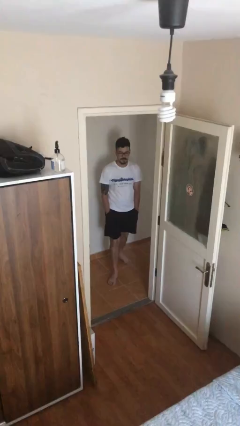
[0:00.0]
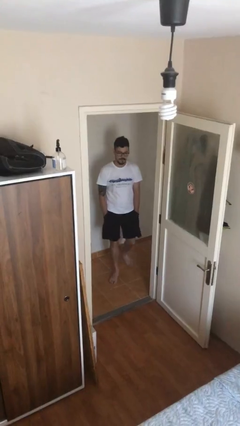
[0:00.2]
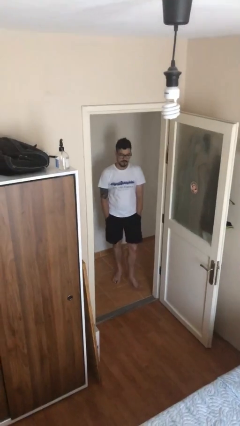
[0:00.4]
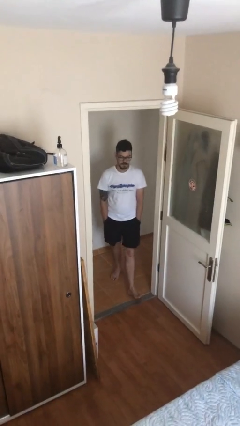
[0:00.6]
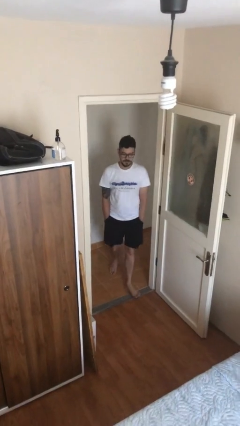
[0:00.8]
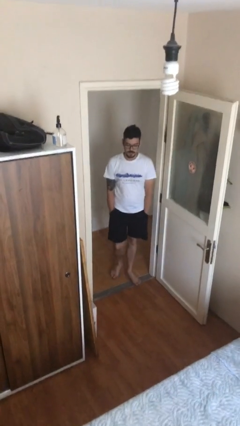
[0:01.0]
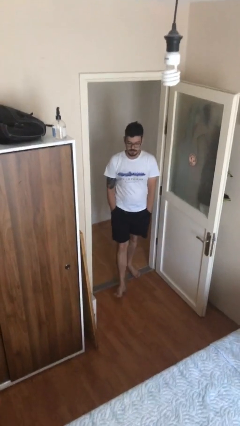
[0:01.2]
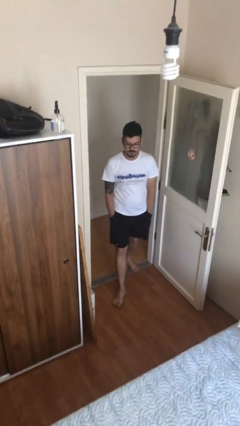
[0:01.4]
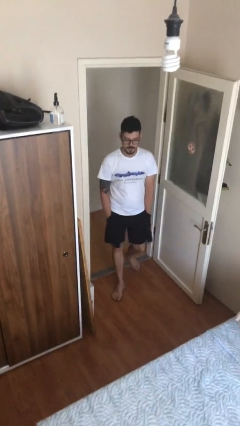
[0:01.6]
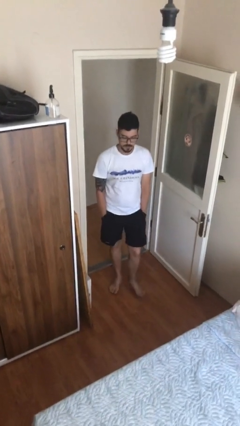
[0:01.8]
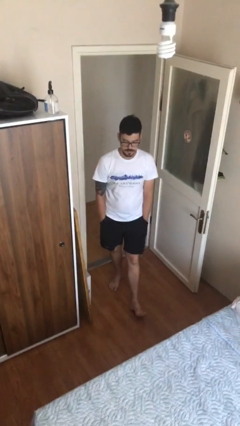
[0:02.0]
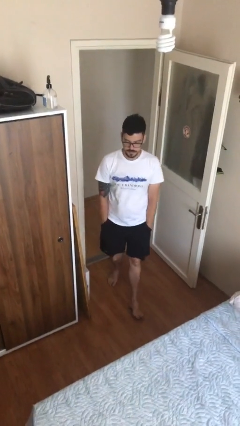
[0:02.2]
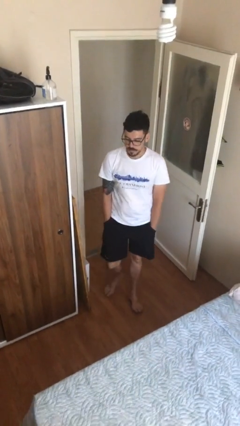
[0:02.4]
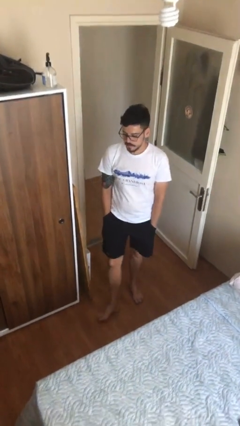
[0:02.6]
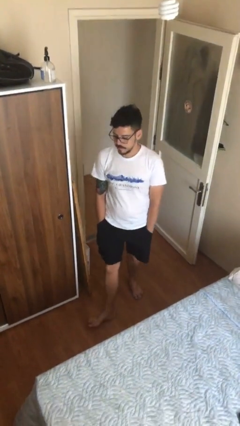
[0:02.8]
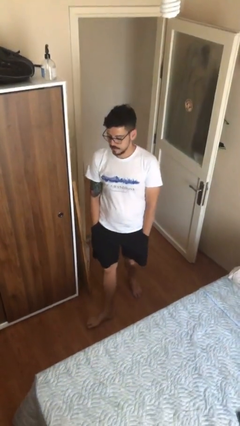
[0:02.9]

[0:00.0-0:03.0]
person enters scene through structure

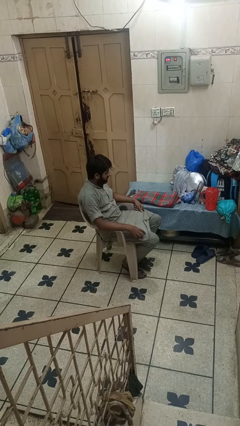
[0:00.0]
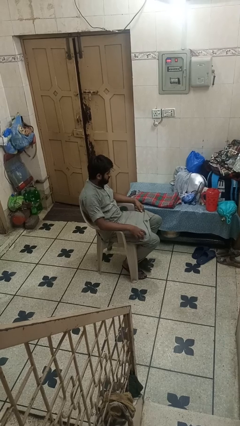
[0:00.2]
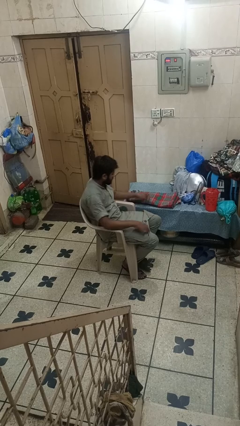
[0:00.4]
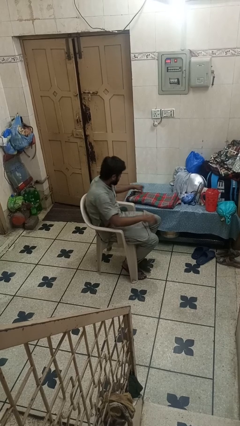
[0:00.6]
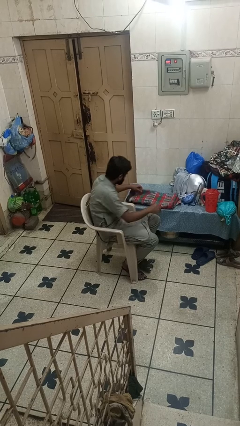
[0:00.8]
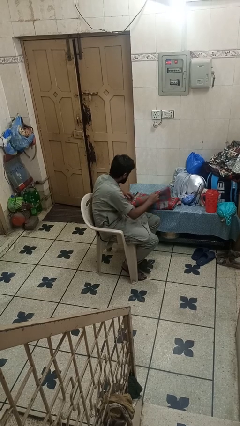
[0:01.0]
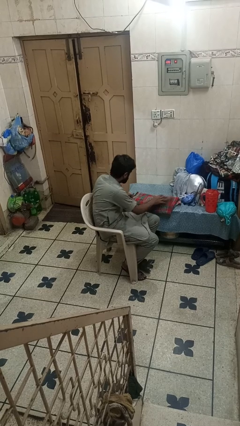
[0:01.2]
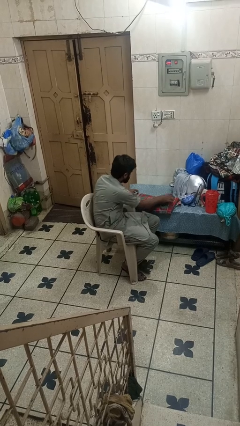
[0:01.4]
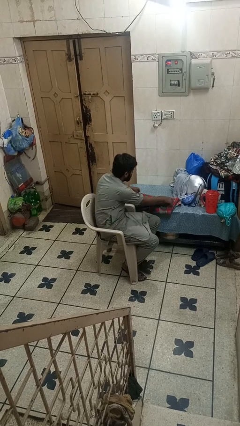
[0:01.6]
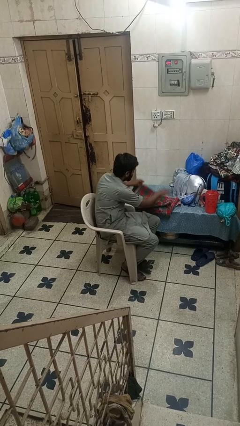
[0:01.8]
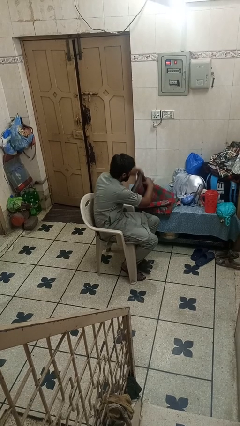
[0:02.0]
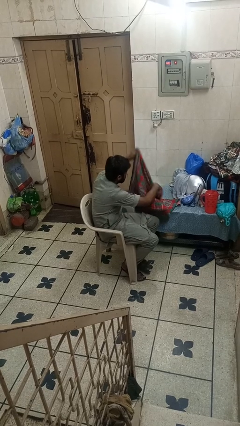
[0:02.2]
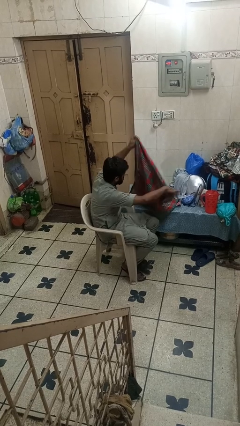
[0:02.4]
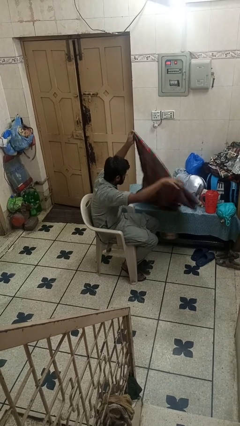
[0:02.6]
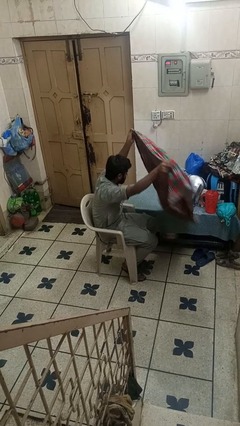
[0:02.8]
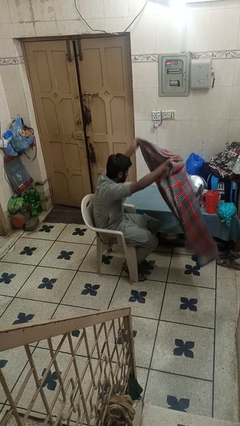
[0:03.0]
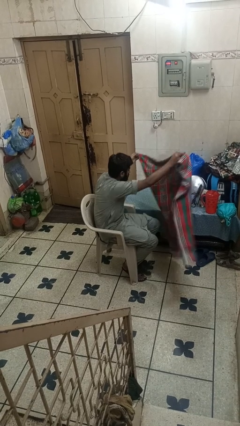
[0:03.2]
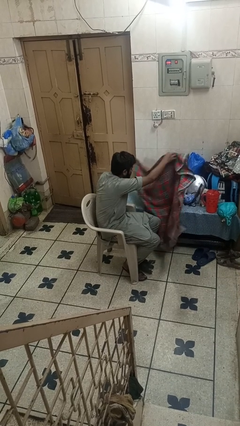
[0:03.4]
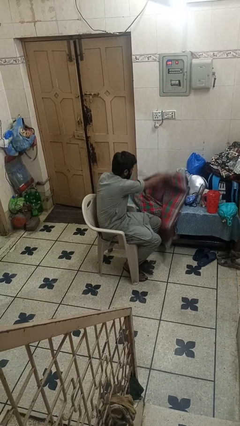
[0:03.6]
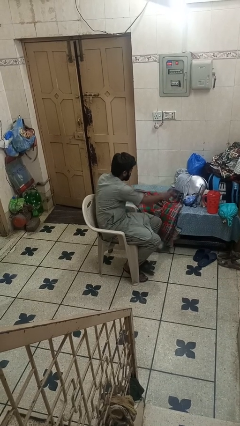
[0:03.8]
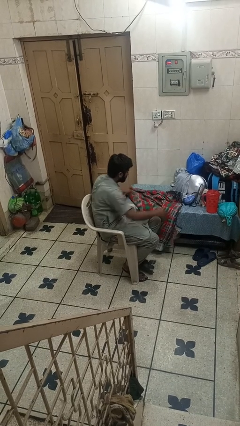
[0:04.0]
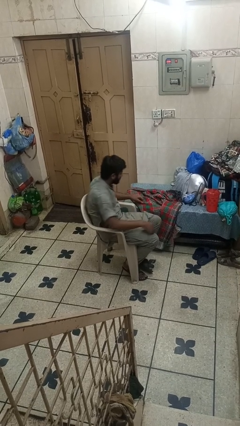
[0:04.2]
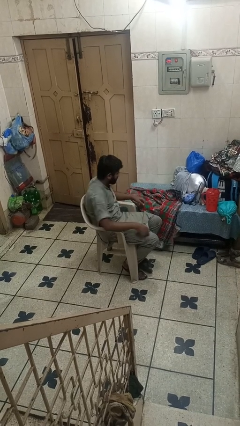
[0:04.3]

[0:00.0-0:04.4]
person unfolds blanket

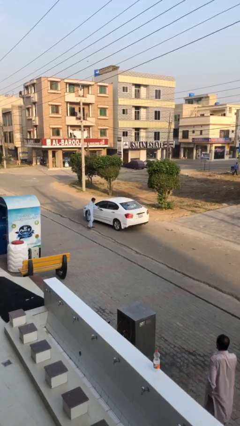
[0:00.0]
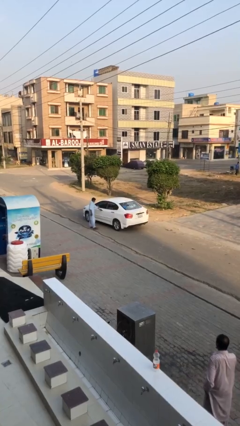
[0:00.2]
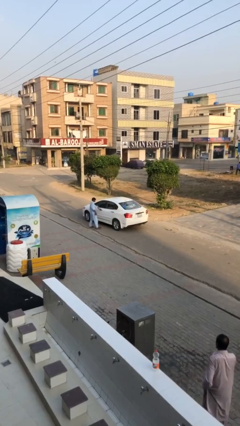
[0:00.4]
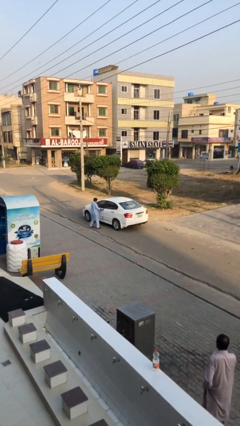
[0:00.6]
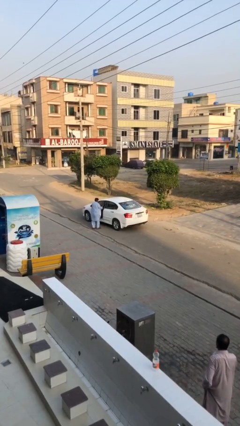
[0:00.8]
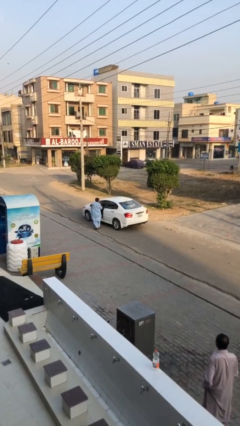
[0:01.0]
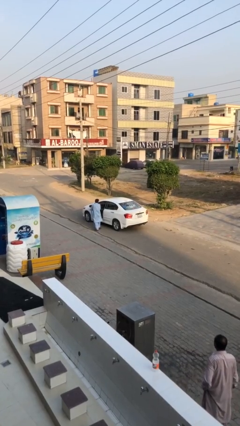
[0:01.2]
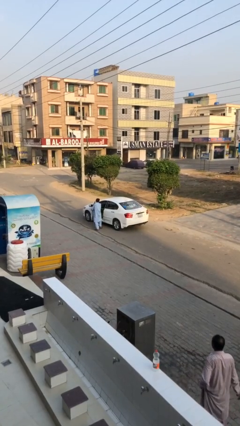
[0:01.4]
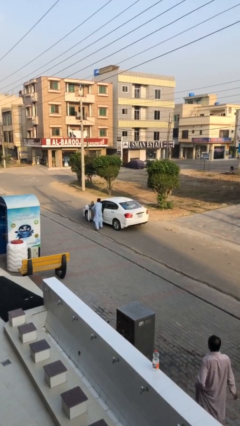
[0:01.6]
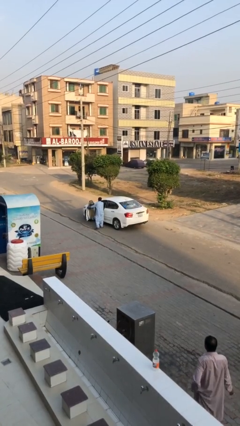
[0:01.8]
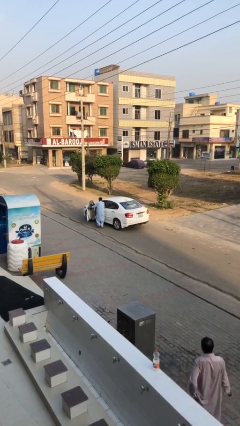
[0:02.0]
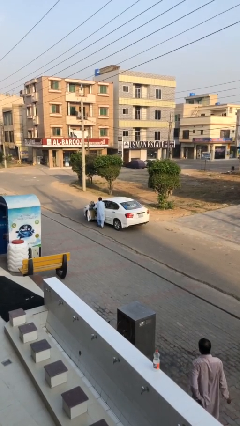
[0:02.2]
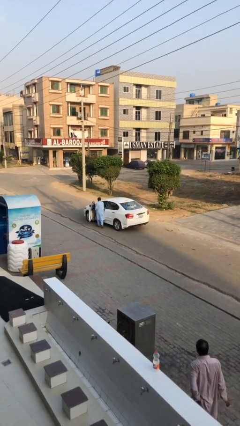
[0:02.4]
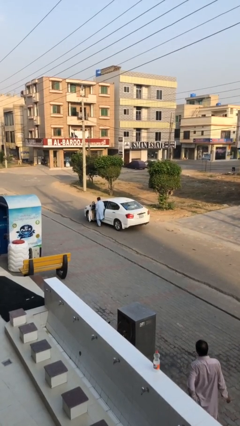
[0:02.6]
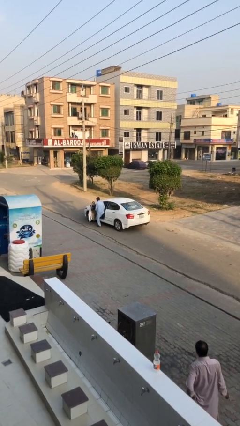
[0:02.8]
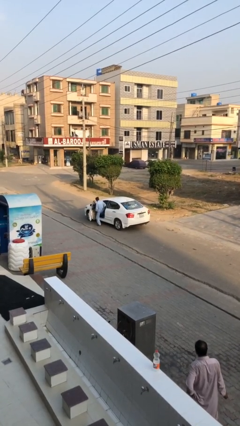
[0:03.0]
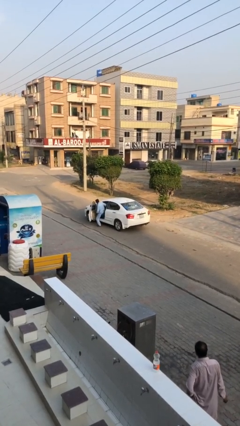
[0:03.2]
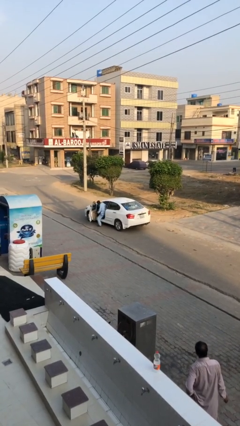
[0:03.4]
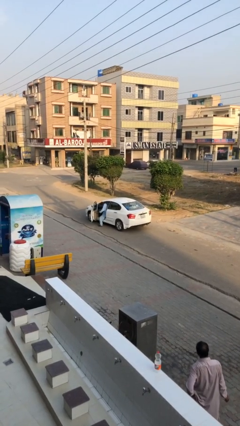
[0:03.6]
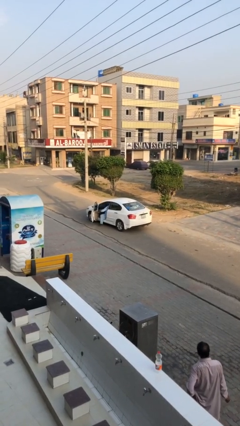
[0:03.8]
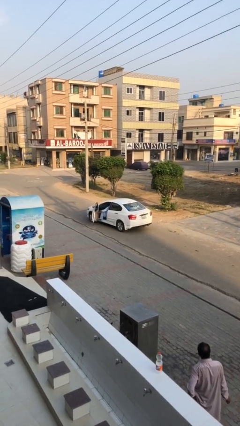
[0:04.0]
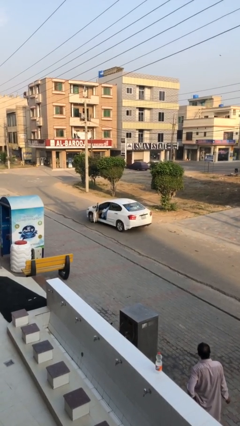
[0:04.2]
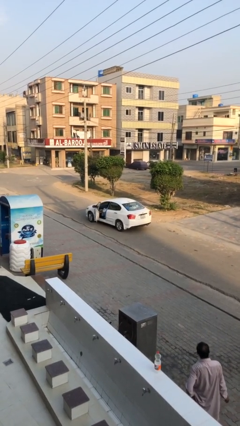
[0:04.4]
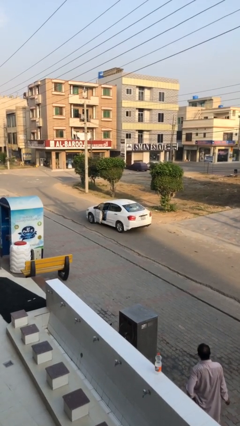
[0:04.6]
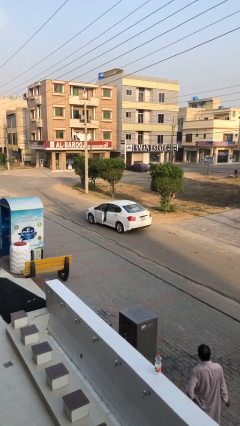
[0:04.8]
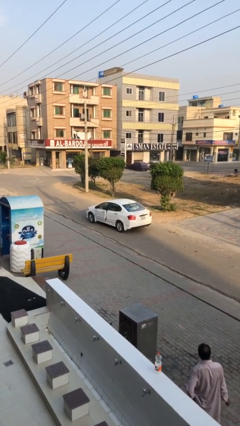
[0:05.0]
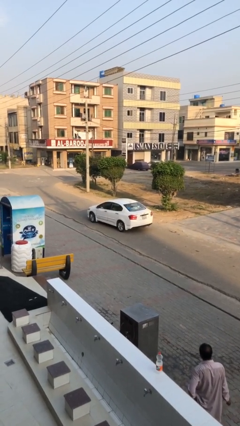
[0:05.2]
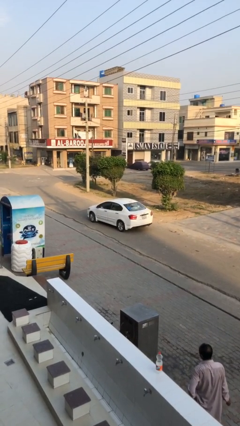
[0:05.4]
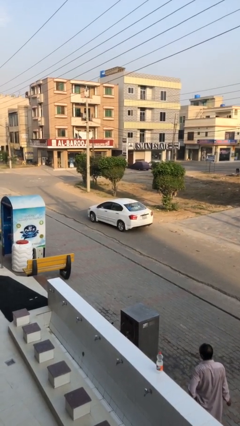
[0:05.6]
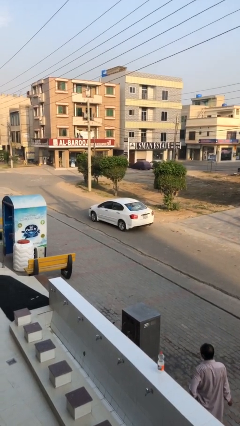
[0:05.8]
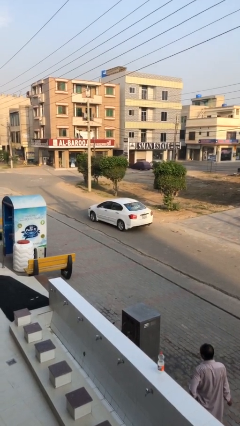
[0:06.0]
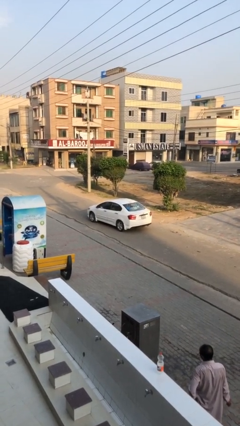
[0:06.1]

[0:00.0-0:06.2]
car picks up person

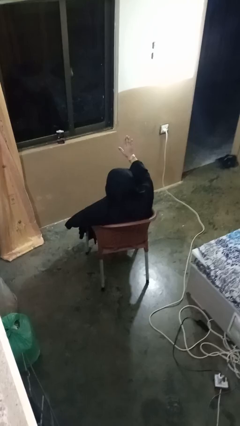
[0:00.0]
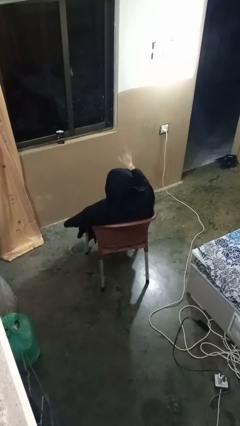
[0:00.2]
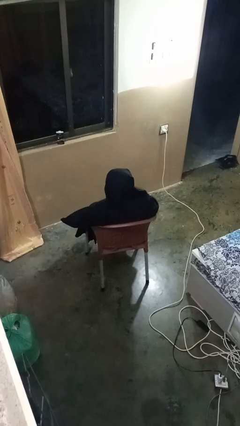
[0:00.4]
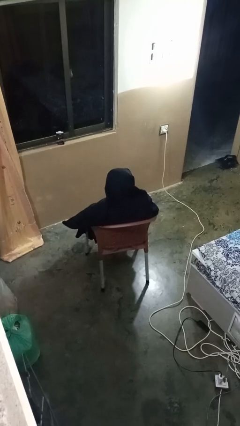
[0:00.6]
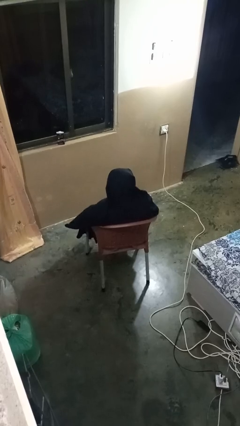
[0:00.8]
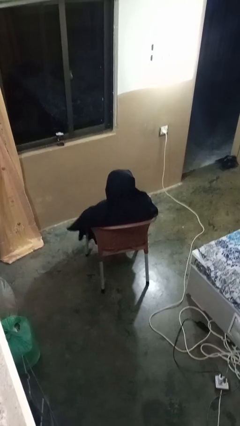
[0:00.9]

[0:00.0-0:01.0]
person gestures lower hand

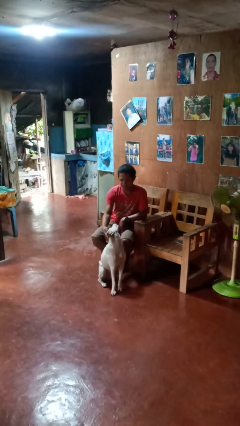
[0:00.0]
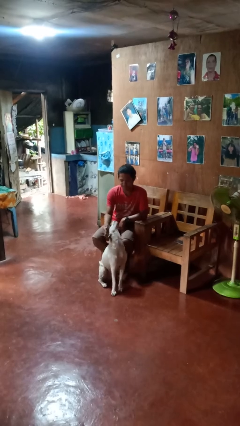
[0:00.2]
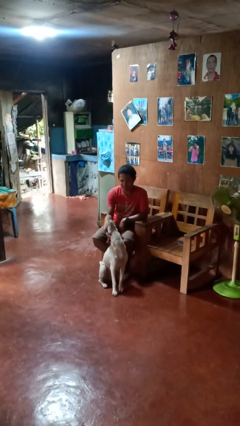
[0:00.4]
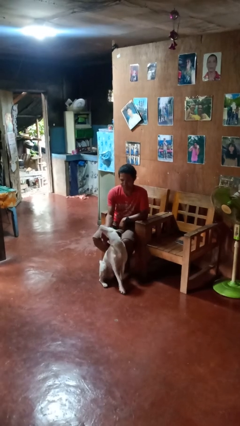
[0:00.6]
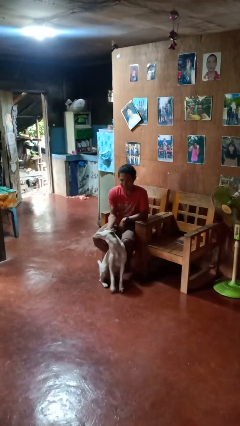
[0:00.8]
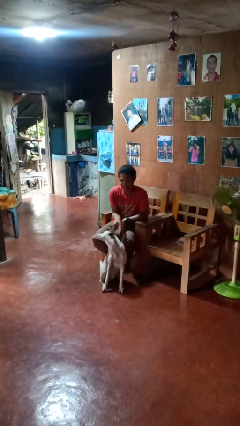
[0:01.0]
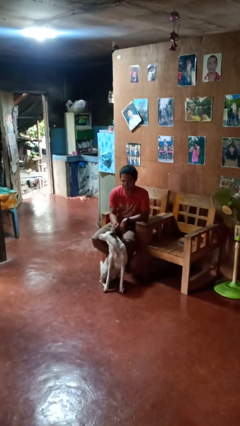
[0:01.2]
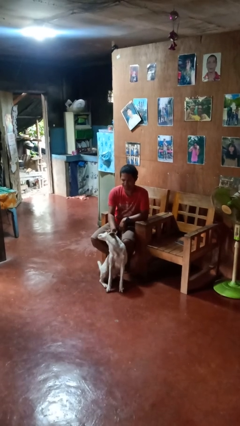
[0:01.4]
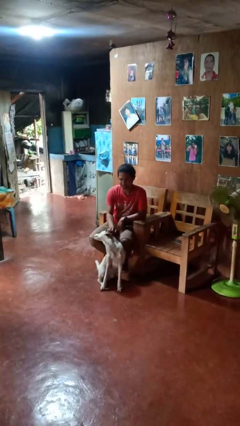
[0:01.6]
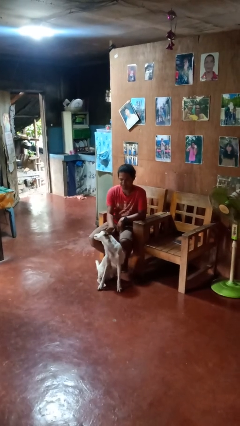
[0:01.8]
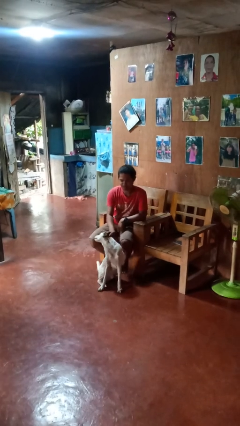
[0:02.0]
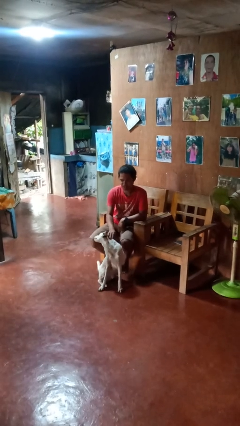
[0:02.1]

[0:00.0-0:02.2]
person pets dog

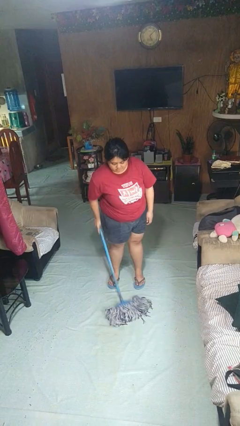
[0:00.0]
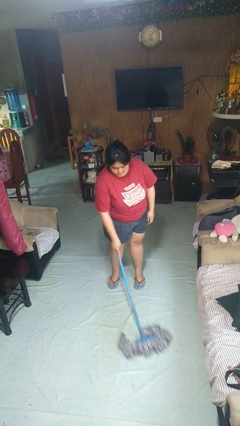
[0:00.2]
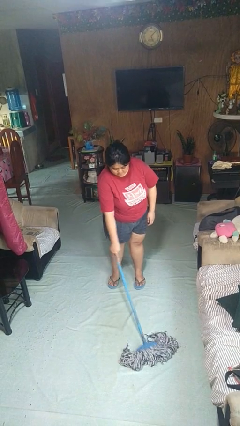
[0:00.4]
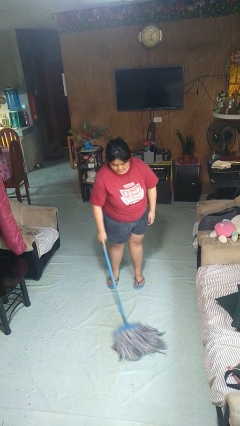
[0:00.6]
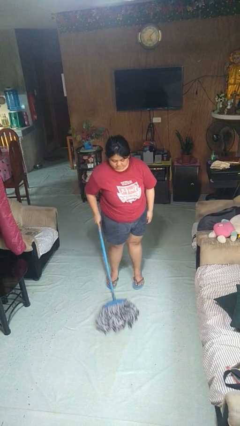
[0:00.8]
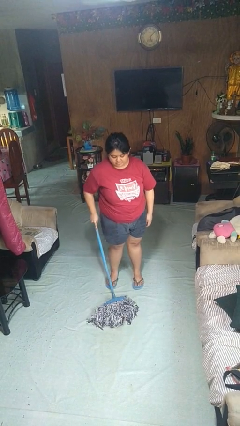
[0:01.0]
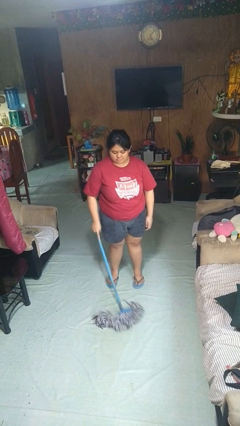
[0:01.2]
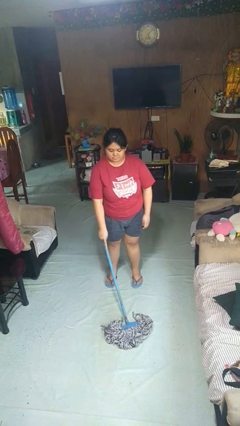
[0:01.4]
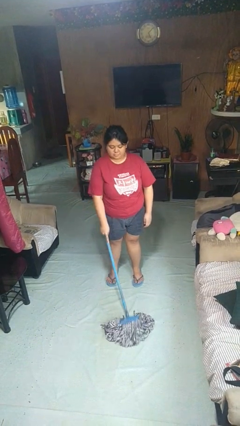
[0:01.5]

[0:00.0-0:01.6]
person mops
